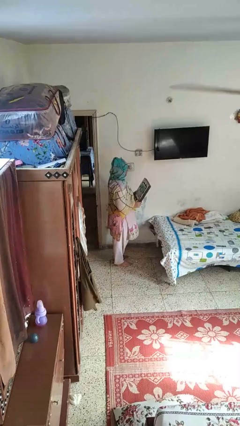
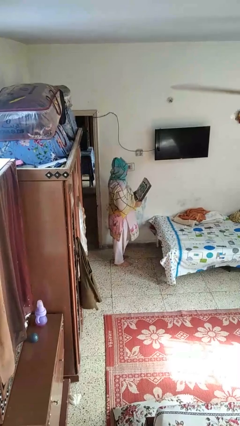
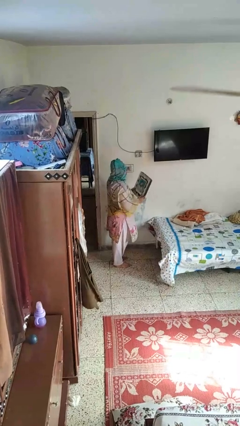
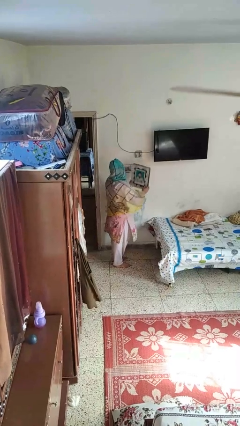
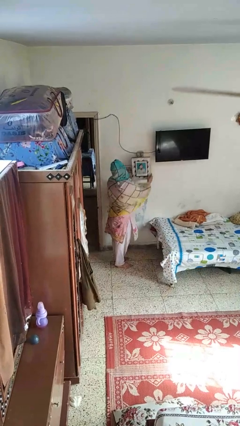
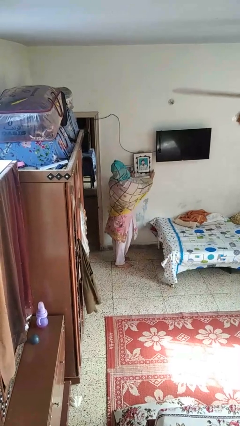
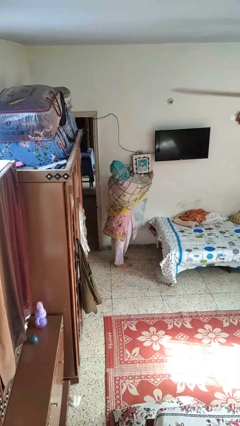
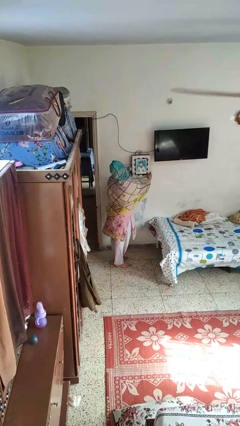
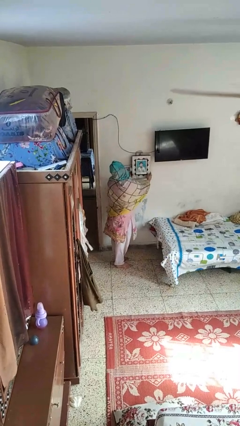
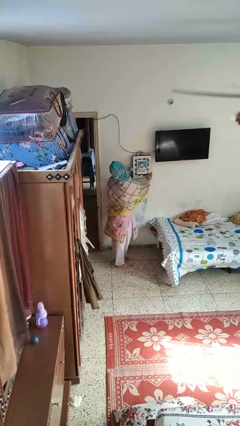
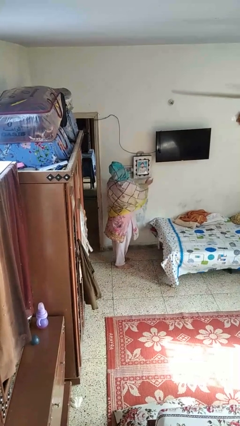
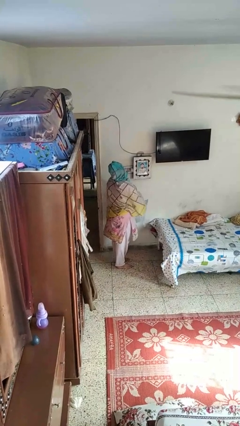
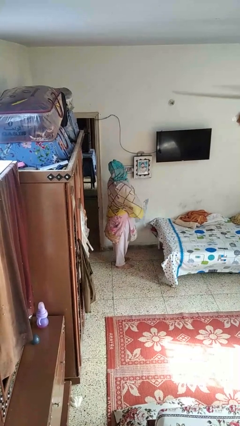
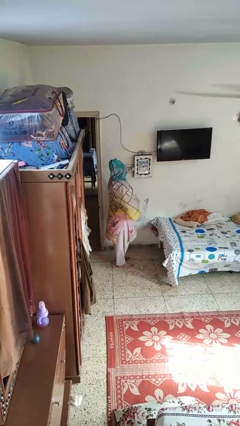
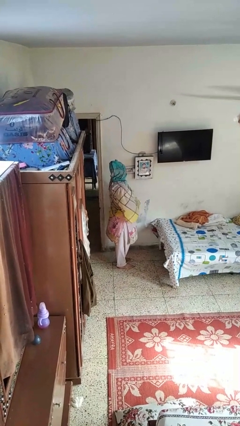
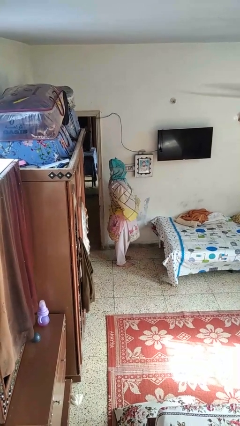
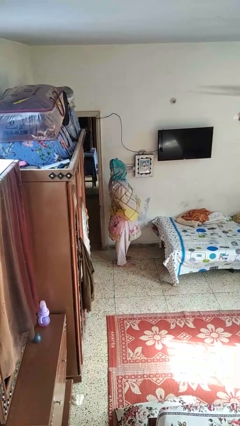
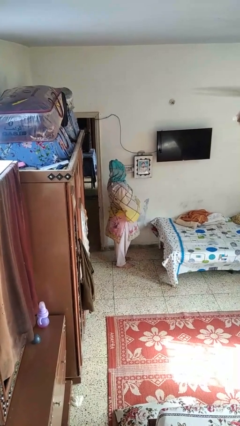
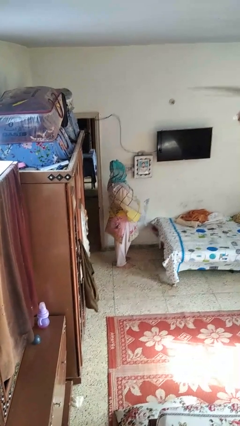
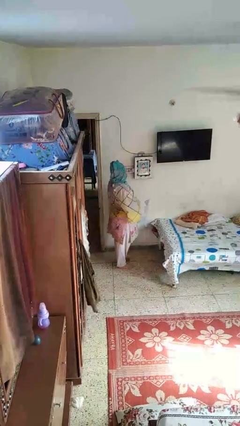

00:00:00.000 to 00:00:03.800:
person puts up picture frame

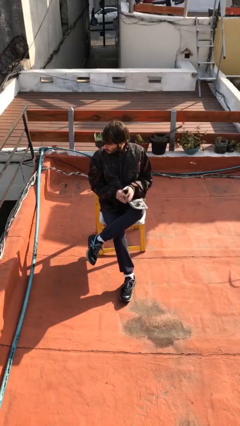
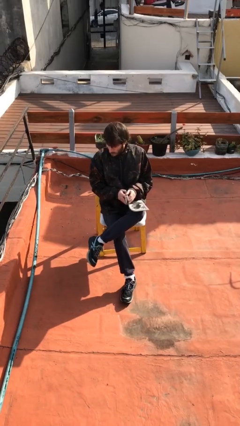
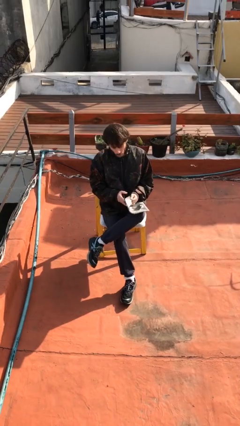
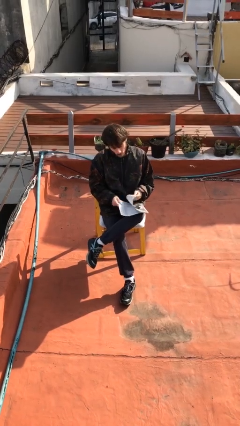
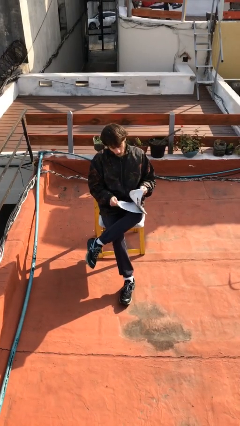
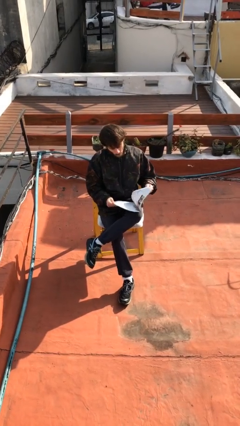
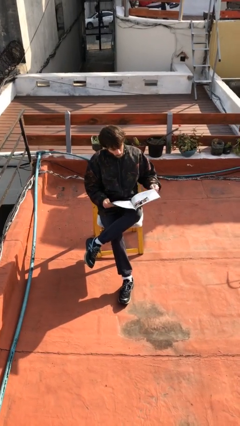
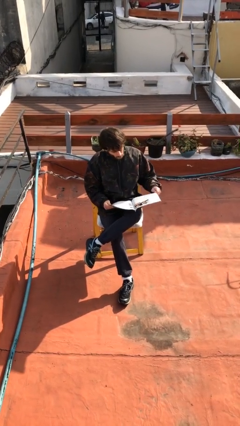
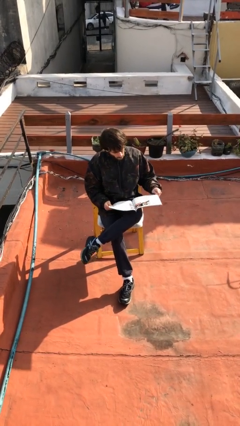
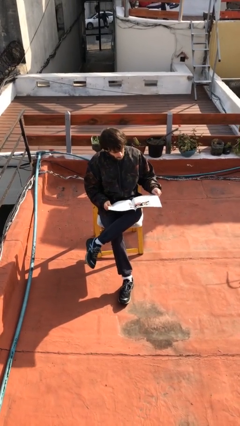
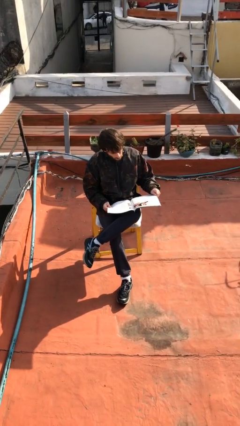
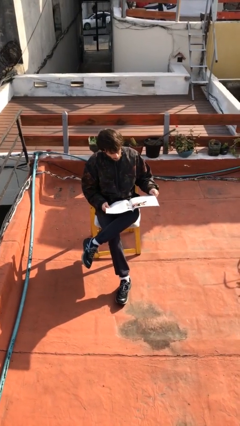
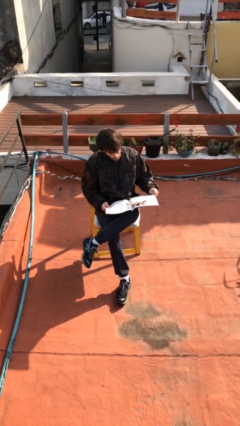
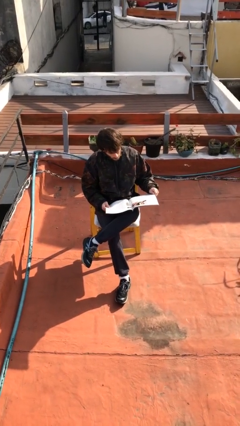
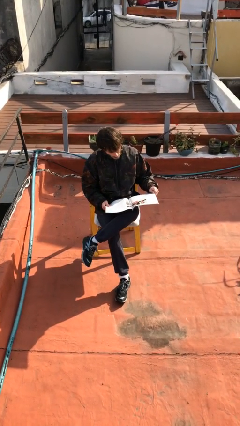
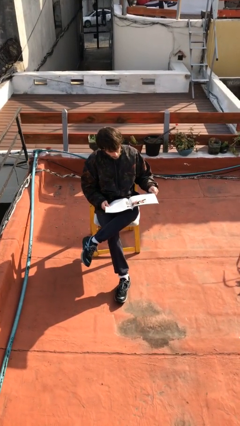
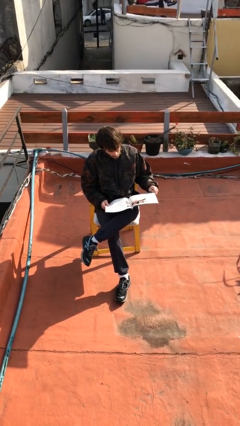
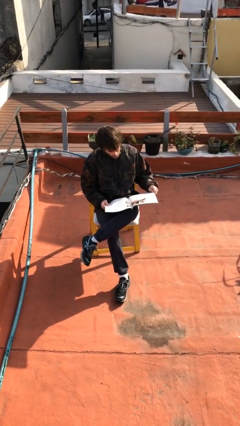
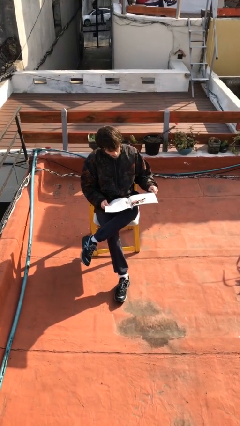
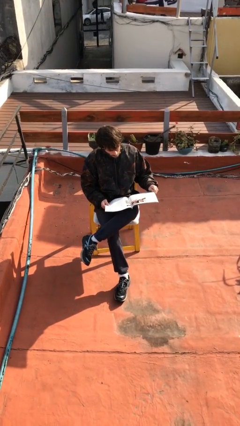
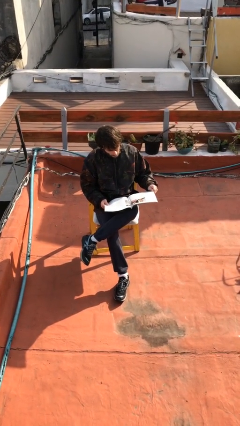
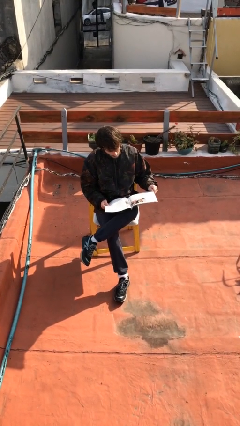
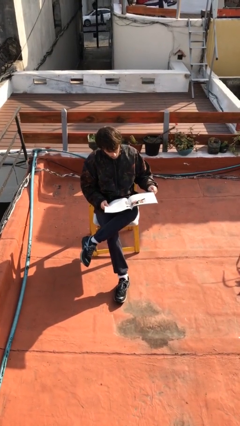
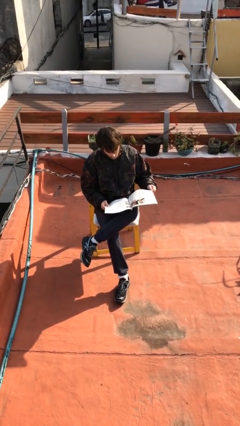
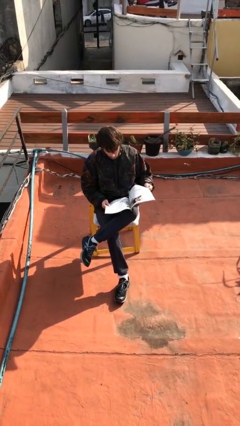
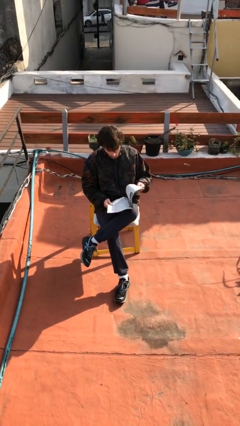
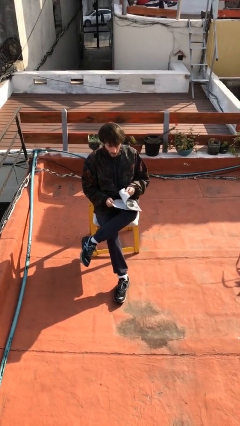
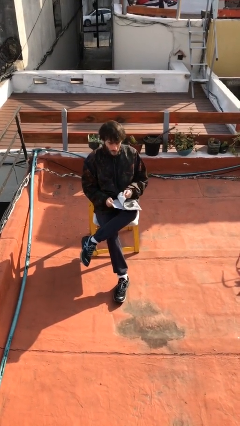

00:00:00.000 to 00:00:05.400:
person reads magazine

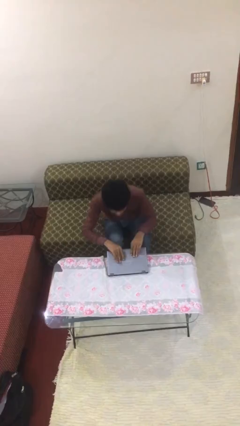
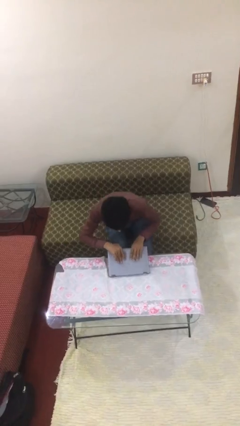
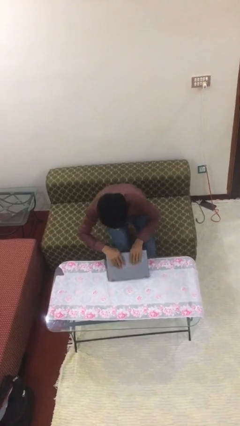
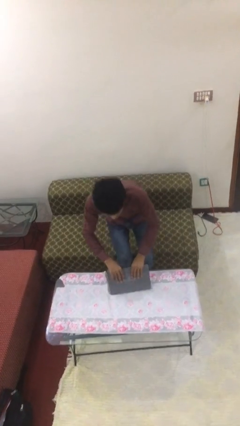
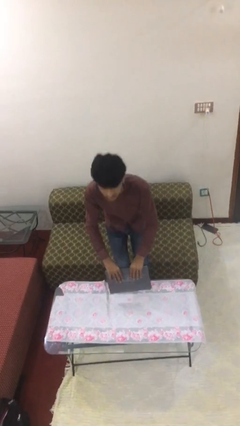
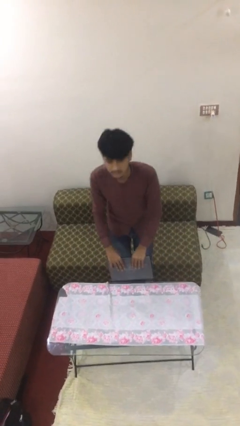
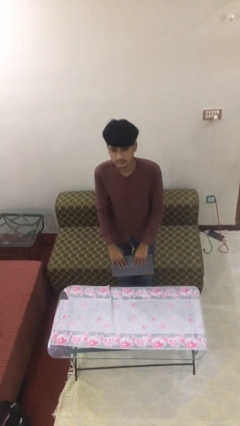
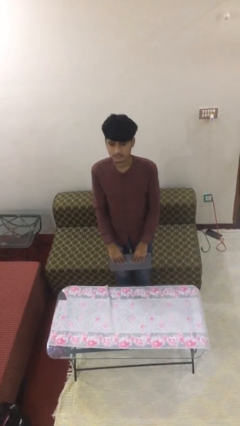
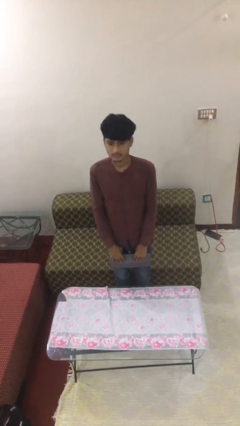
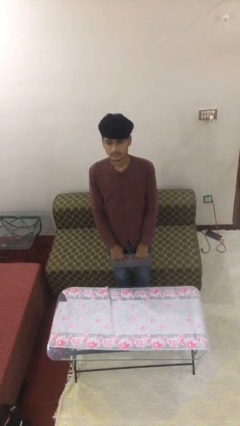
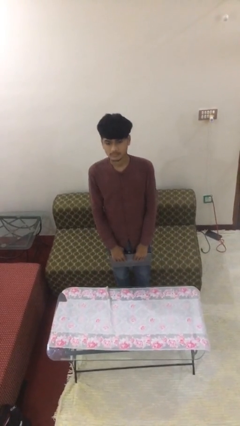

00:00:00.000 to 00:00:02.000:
person stands up

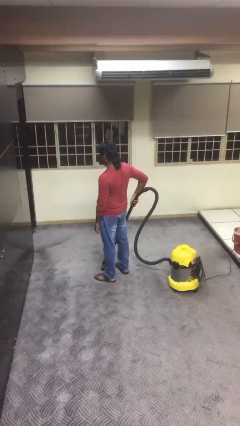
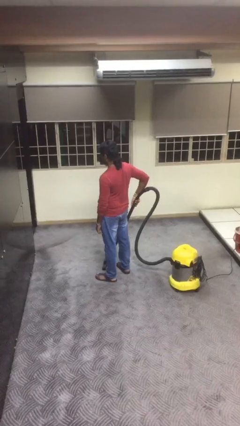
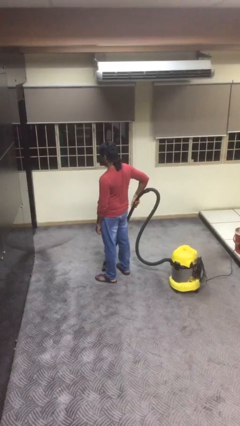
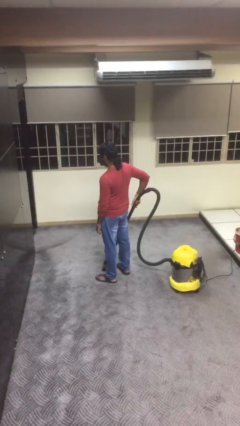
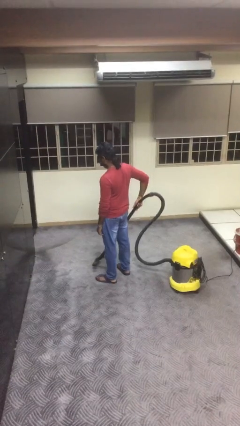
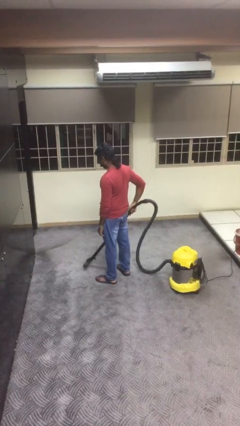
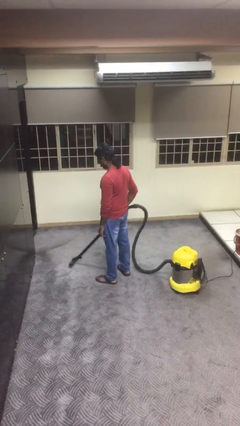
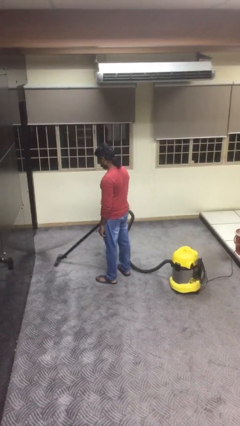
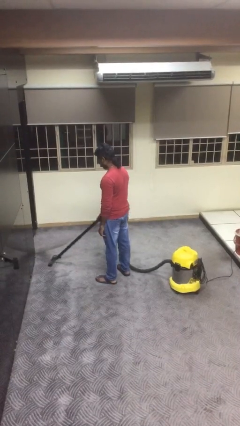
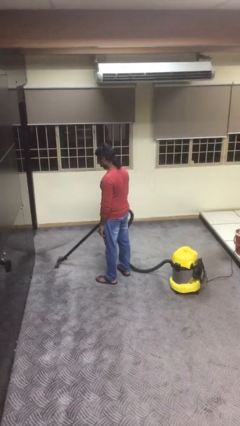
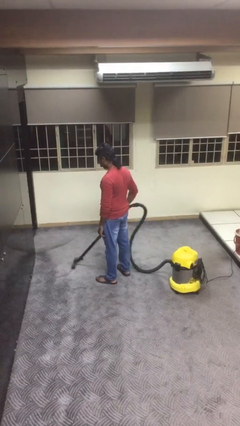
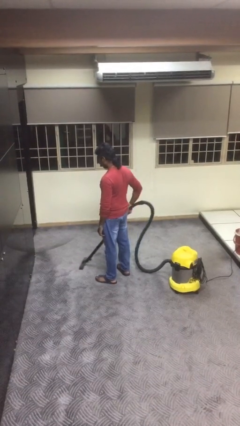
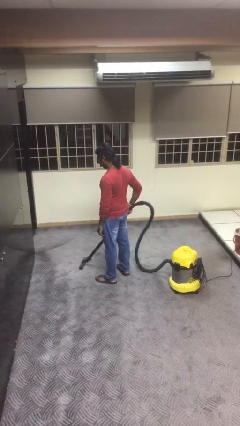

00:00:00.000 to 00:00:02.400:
person vacuums carpet

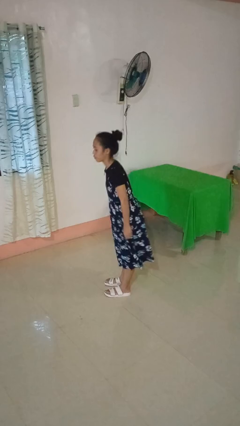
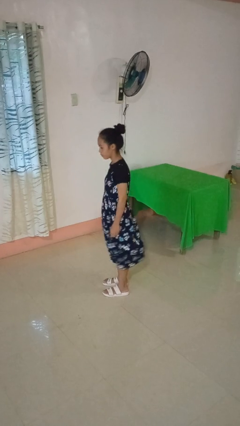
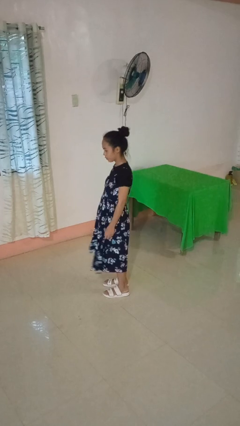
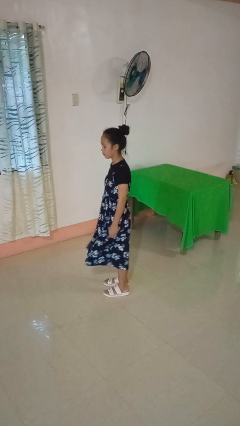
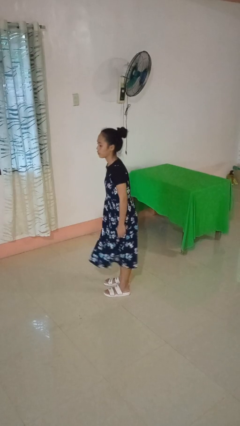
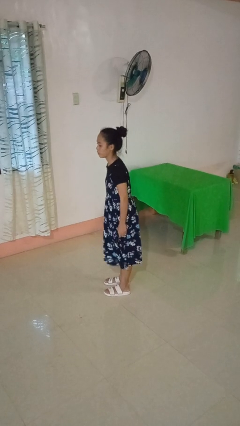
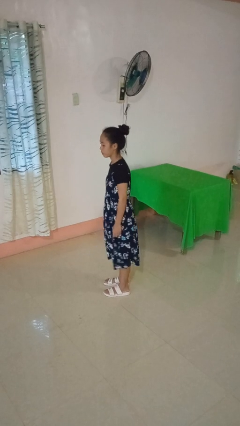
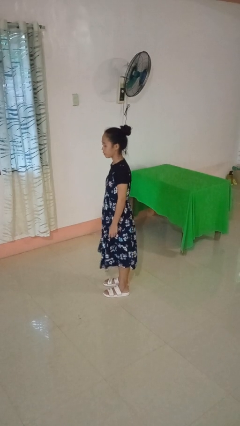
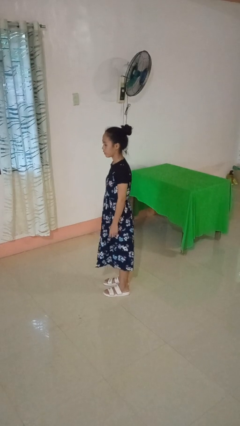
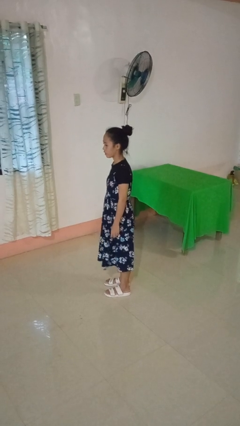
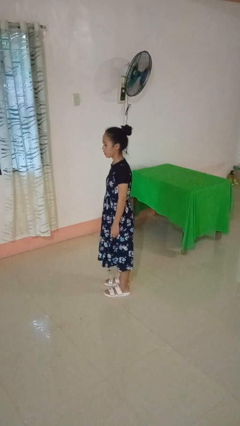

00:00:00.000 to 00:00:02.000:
person wiggles hips

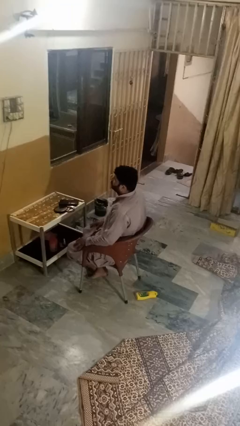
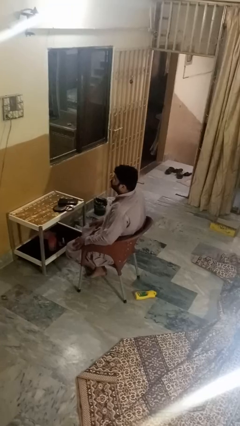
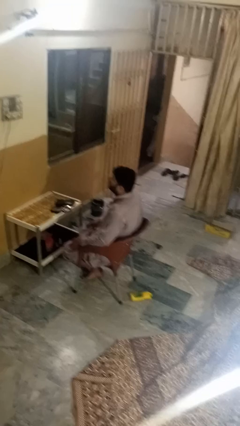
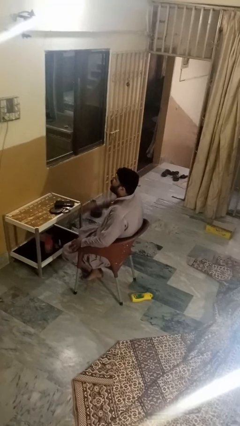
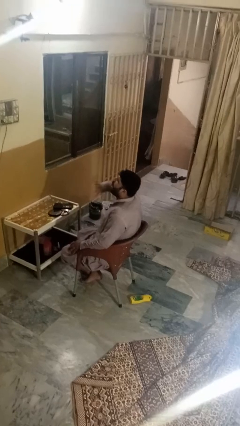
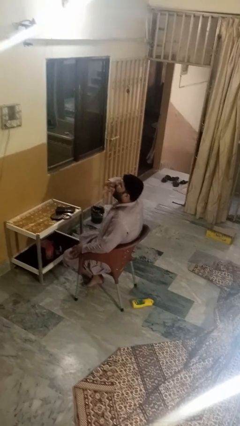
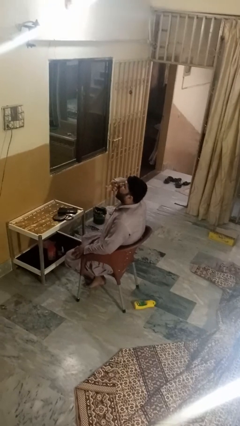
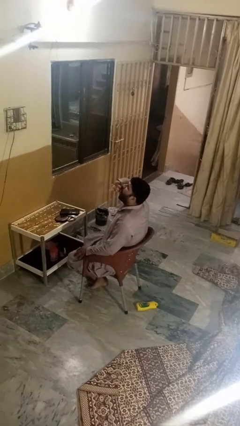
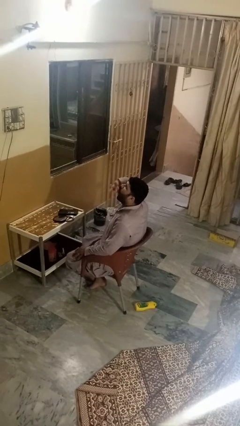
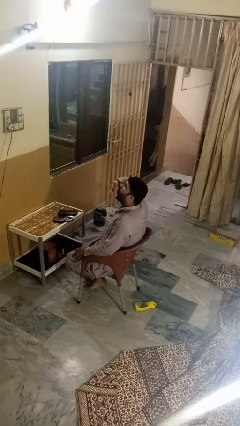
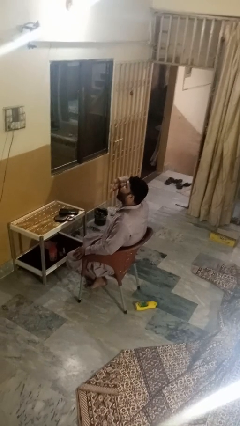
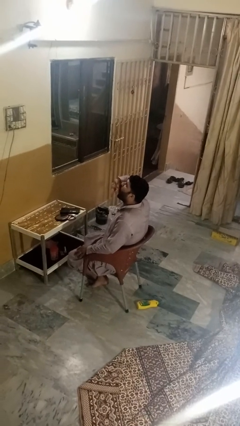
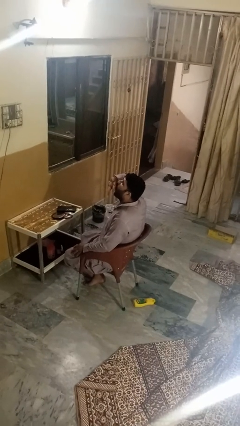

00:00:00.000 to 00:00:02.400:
person yawns
